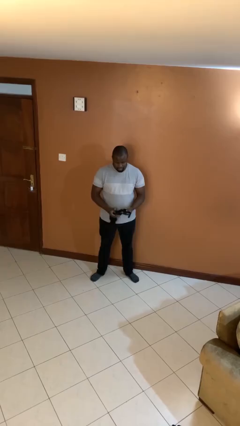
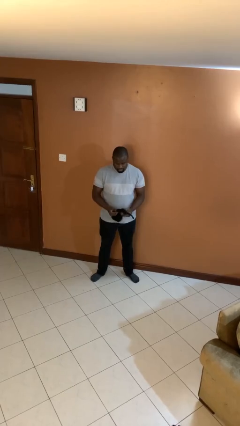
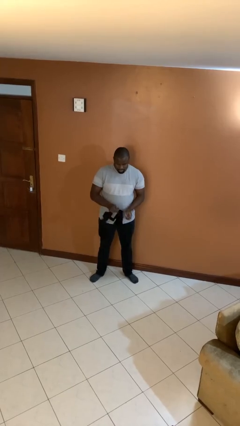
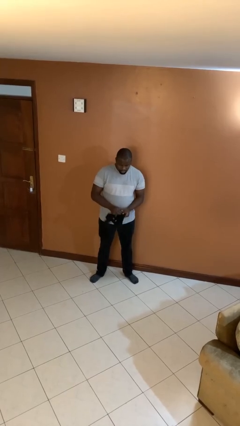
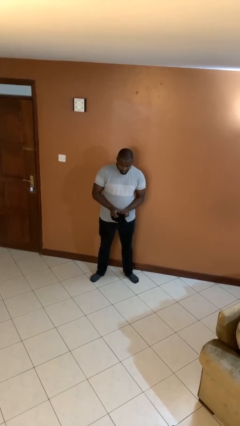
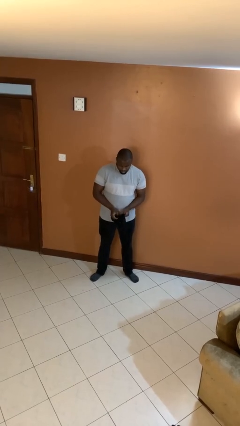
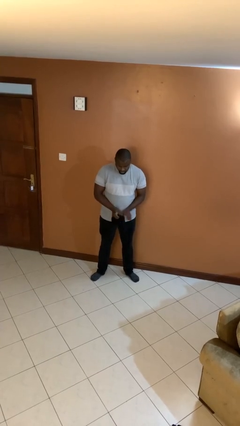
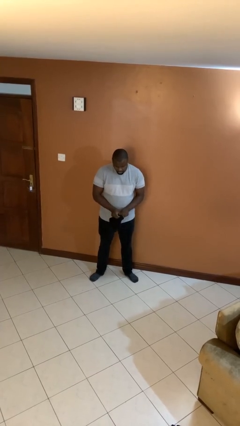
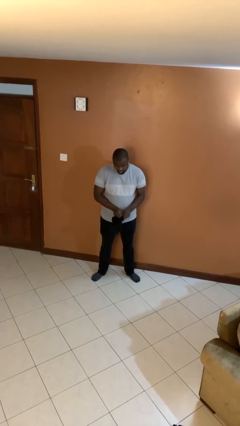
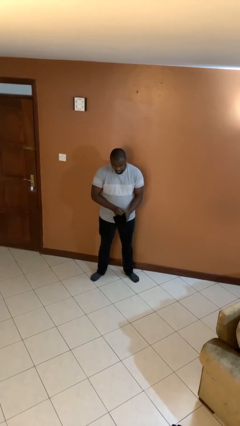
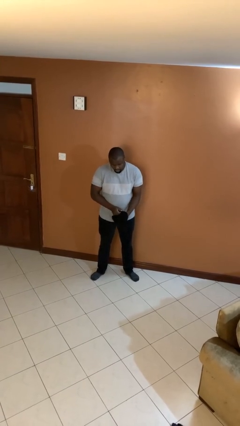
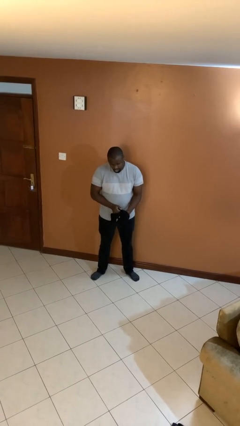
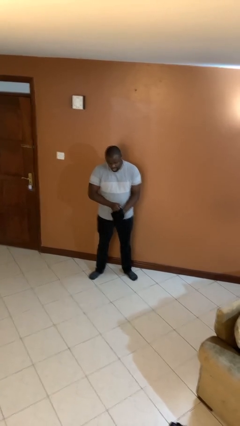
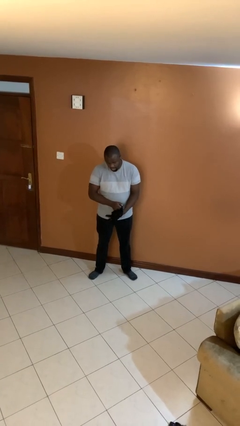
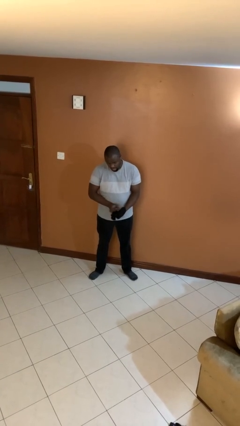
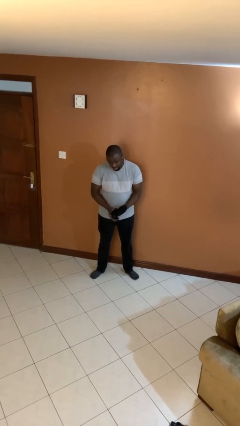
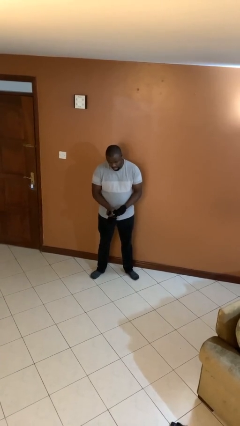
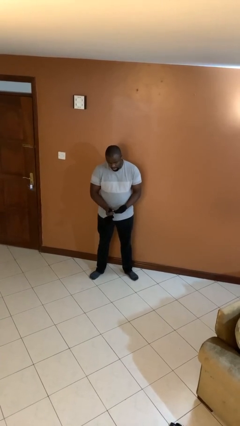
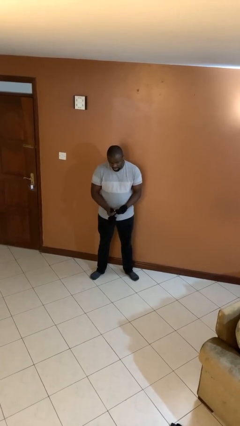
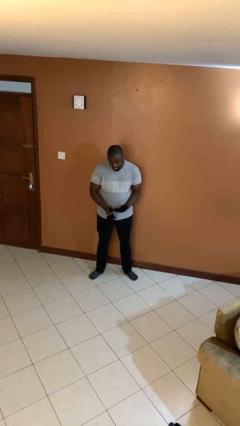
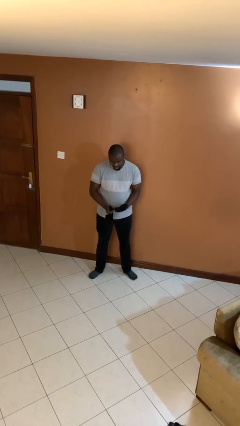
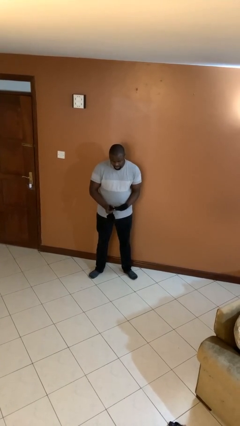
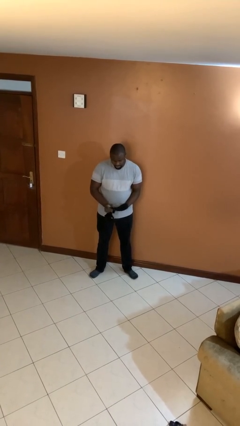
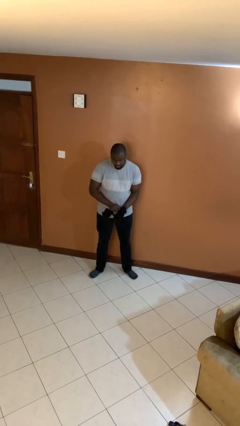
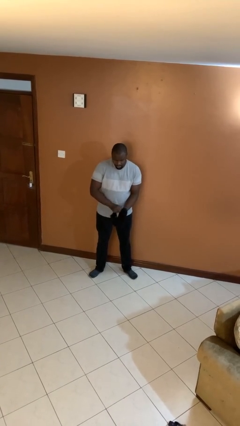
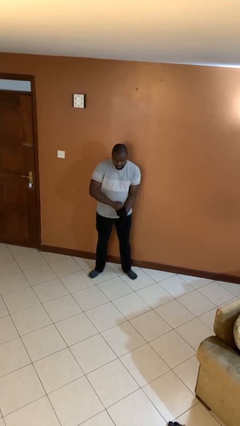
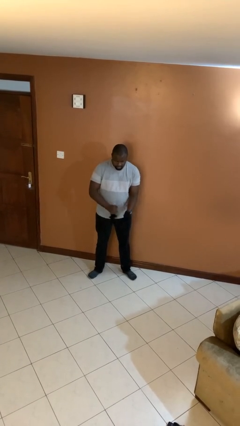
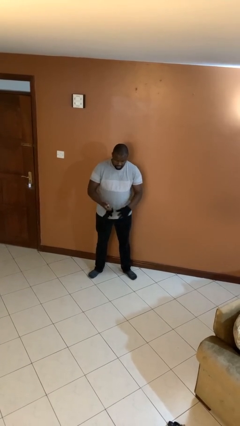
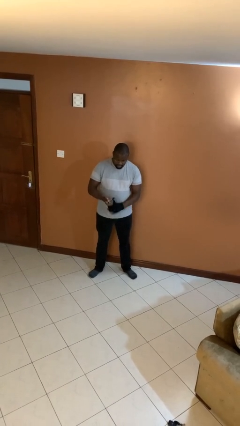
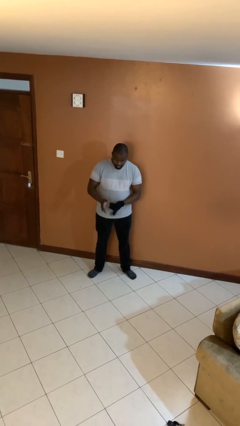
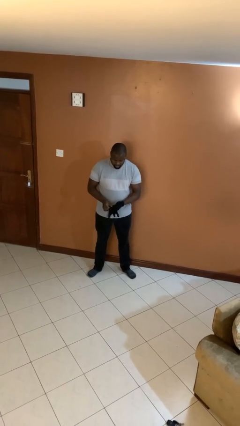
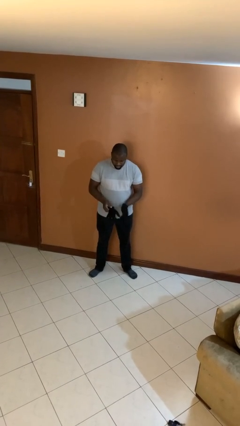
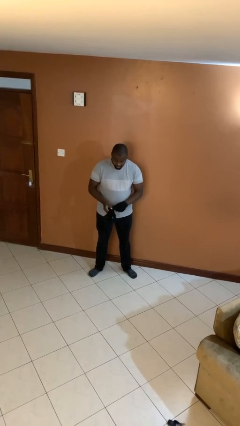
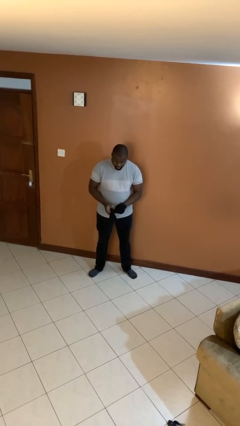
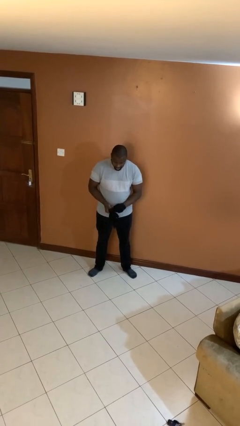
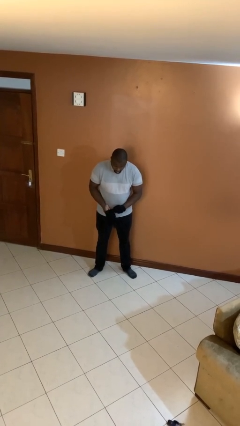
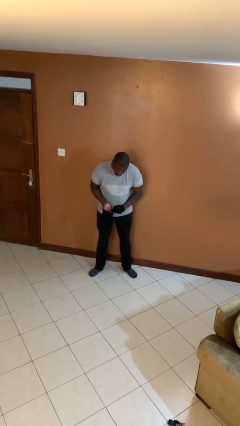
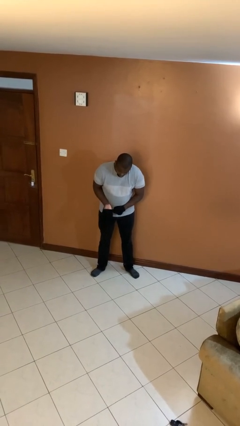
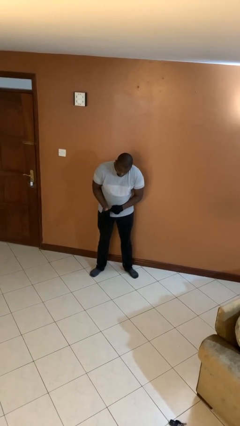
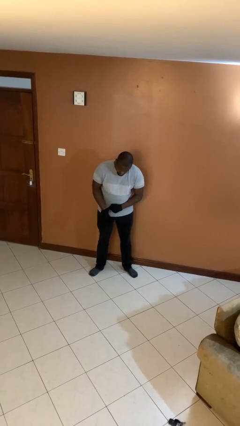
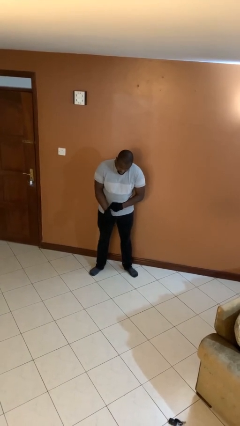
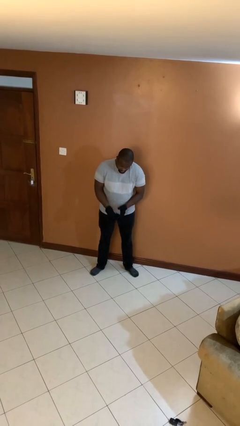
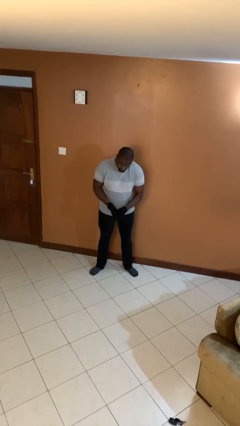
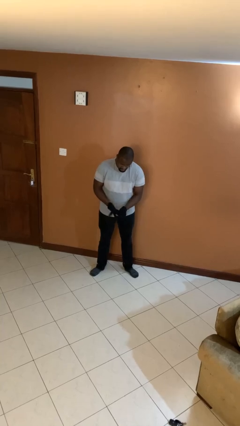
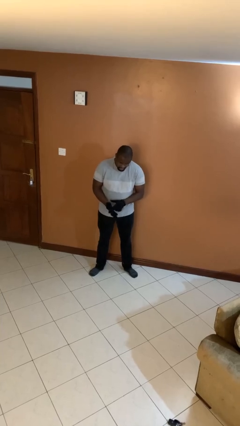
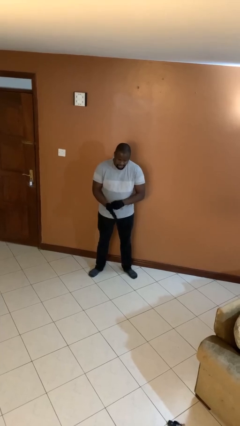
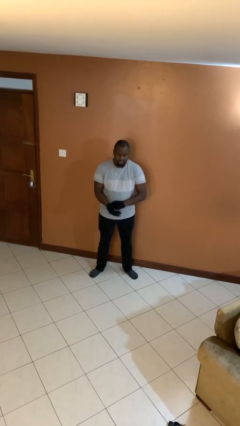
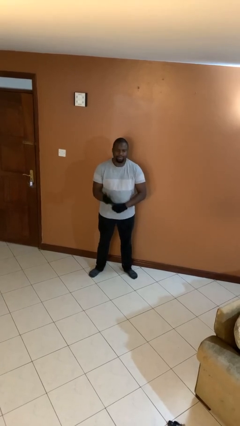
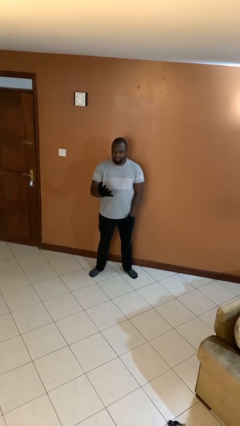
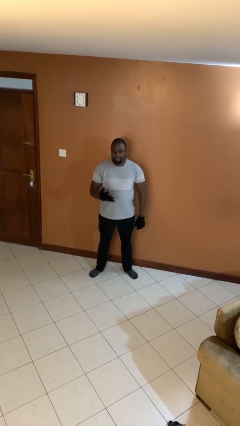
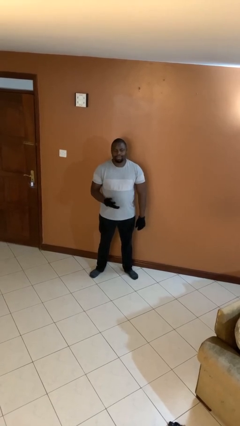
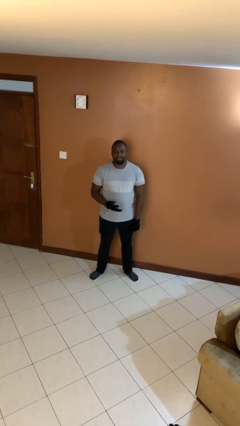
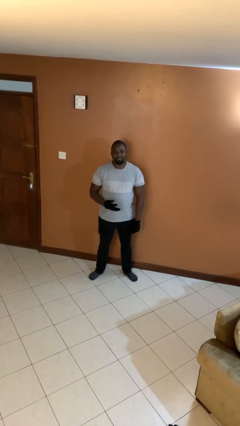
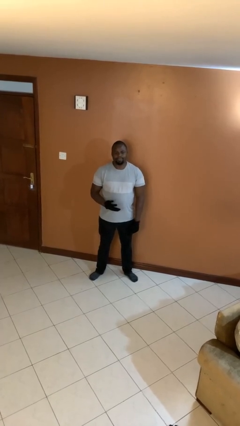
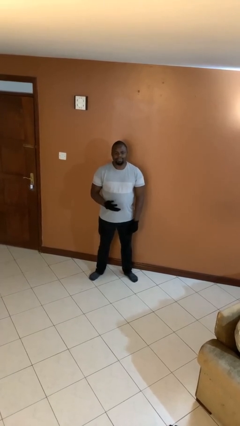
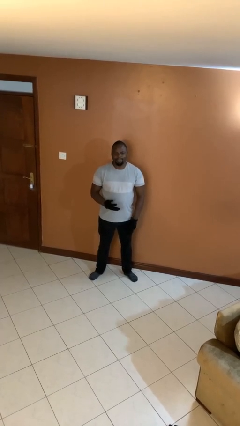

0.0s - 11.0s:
person puts on gloves

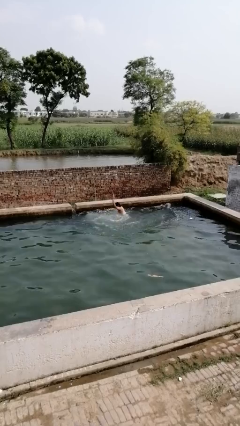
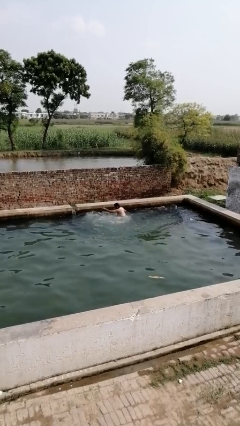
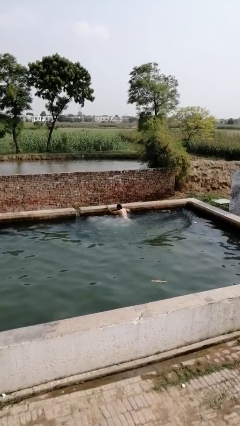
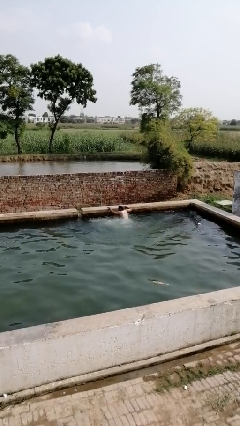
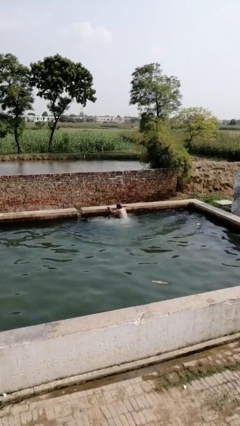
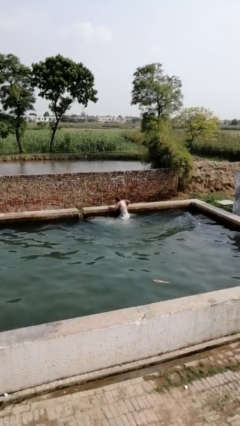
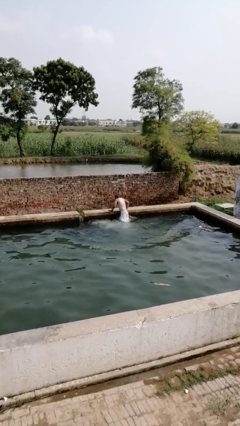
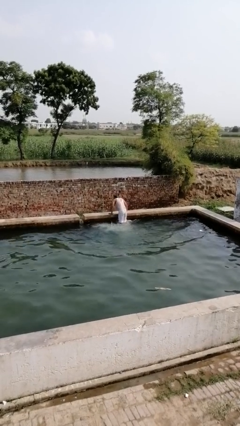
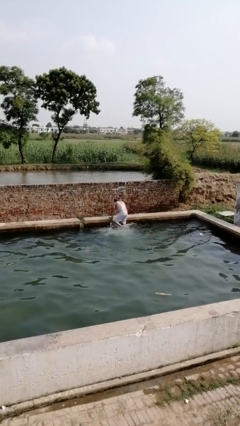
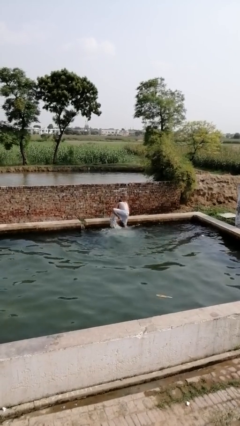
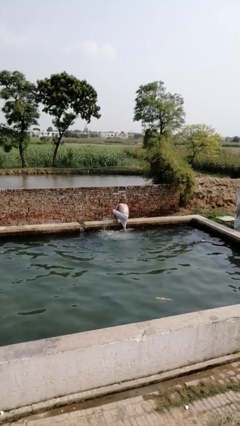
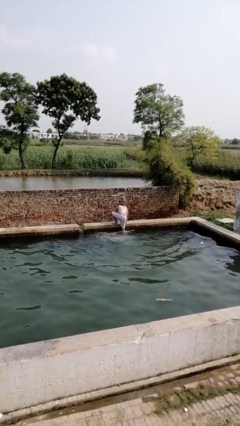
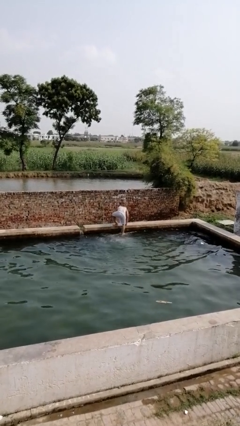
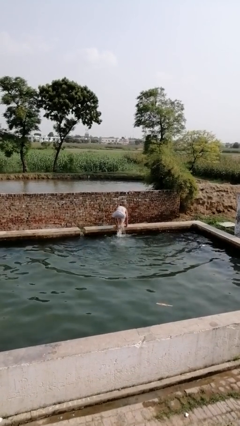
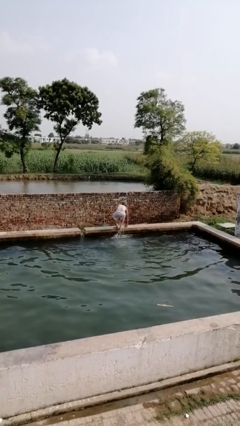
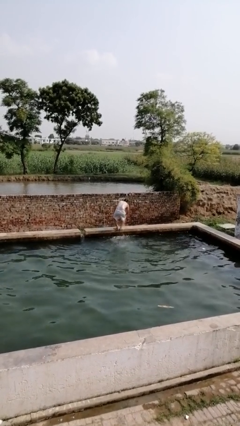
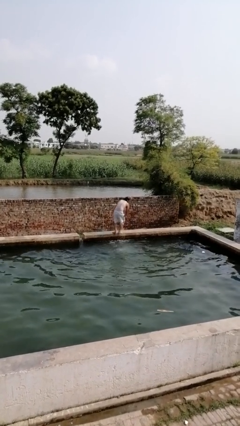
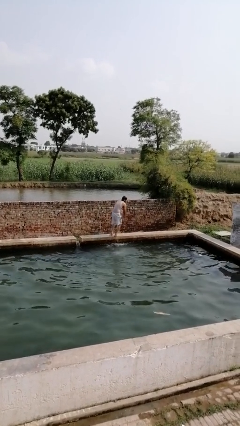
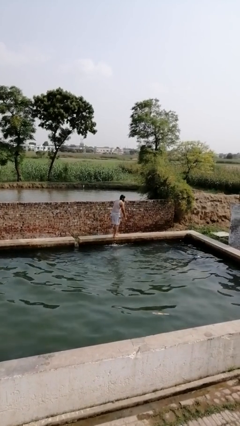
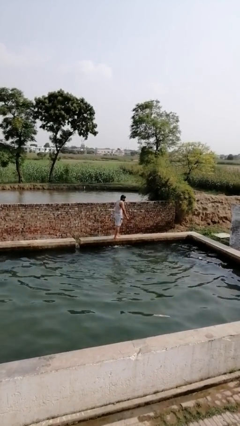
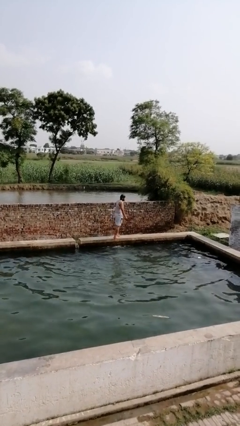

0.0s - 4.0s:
person exits pool

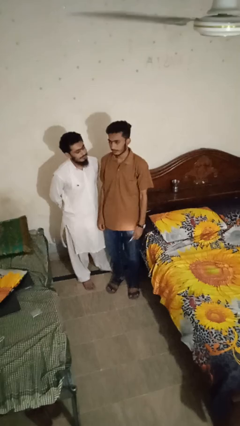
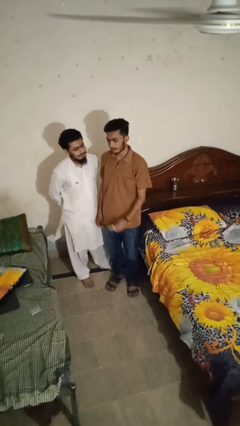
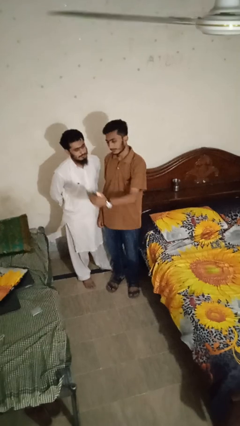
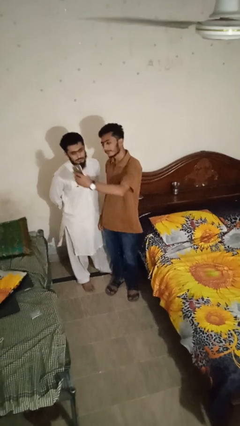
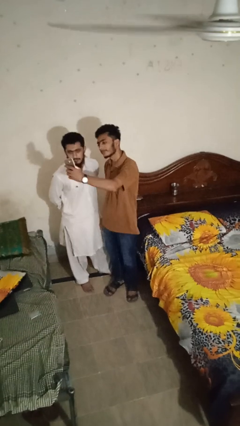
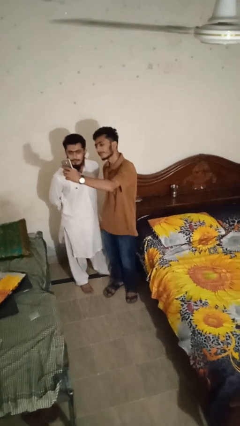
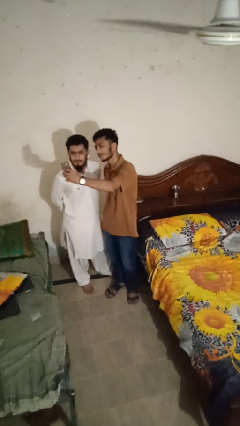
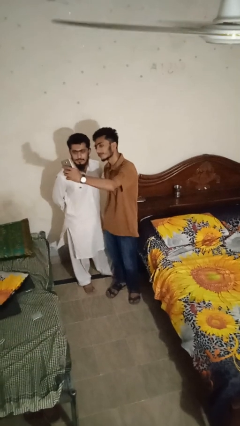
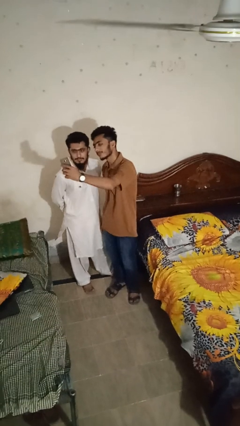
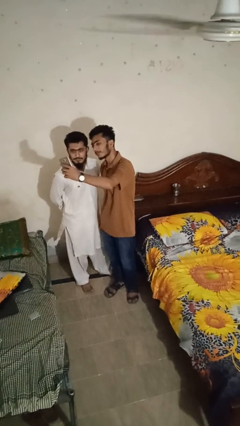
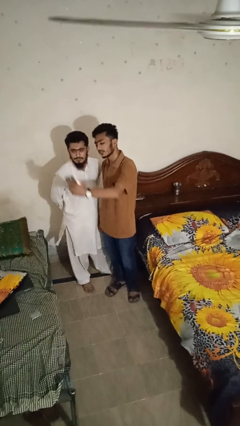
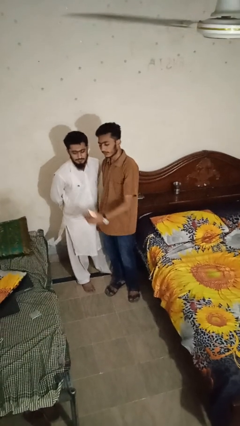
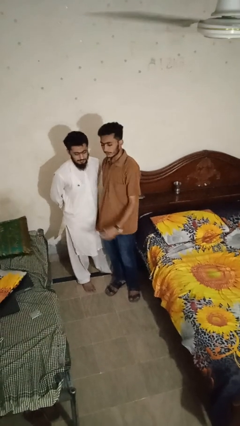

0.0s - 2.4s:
person takes selfie with person

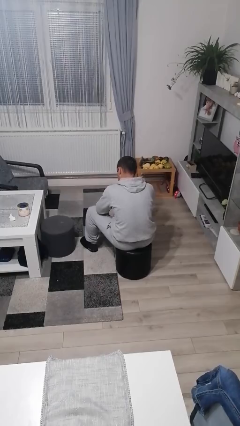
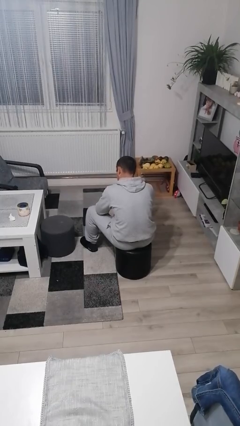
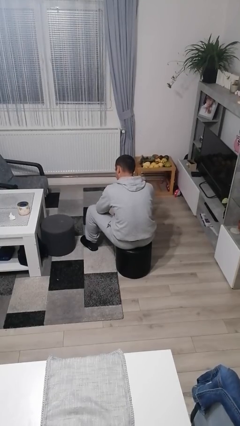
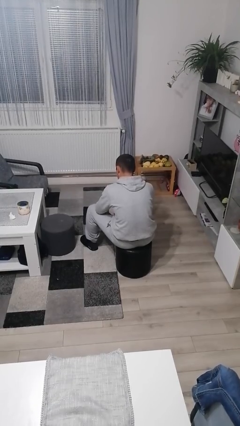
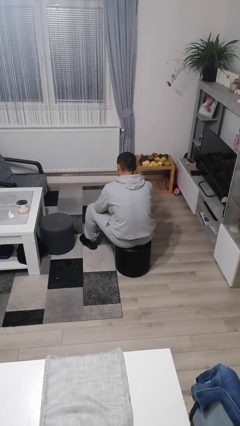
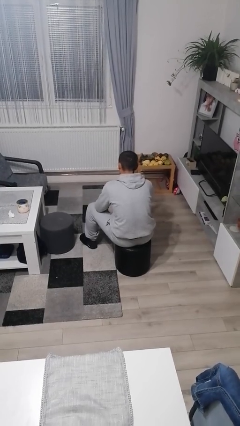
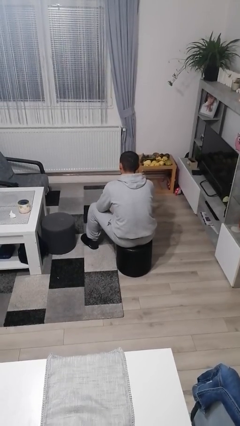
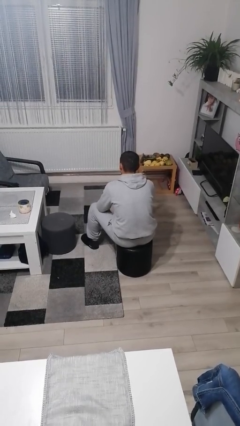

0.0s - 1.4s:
person gestures behind me
